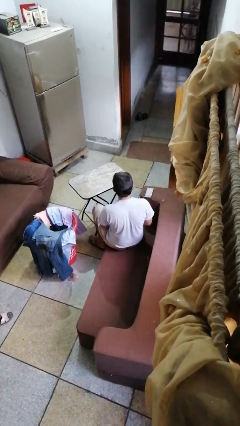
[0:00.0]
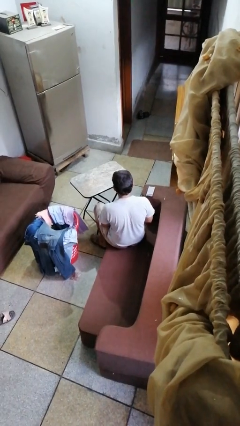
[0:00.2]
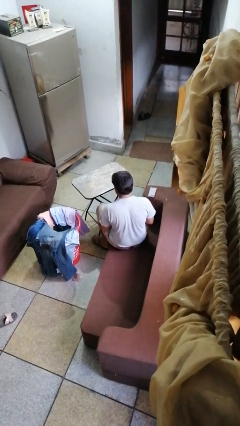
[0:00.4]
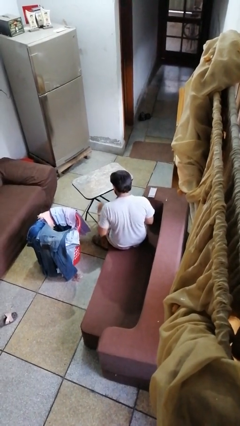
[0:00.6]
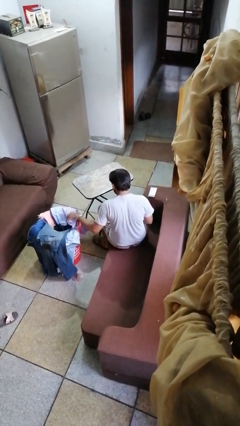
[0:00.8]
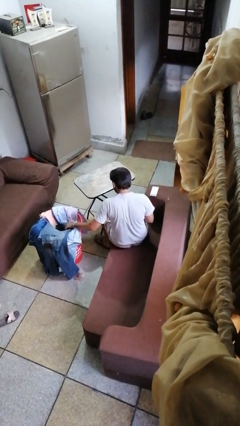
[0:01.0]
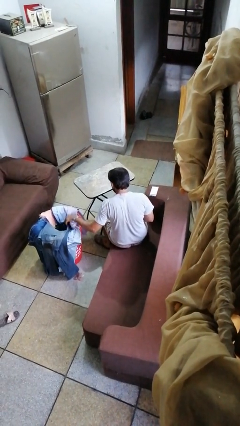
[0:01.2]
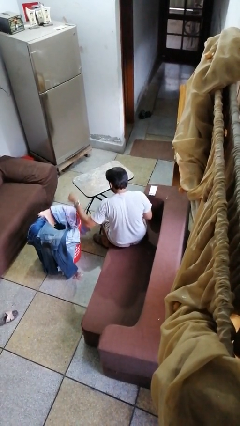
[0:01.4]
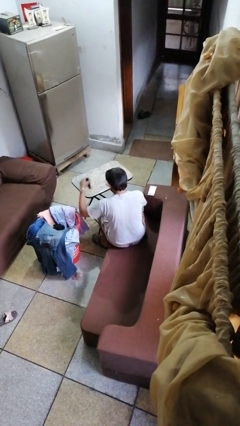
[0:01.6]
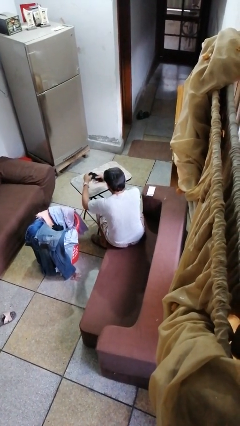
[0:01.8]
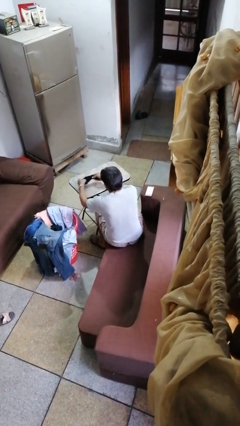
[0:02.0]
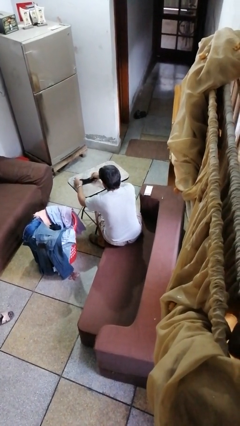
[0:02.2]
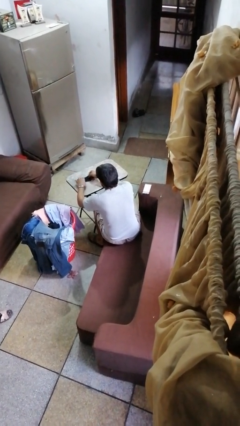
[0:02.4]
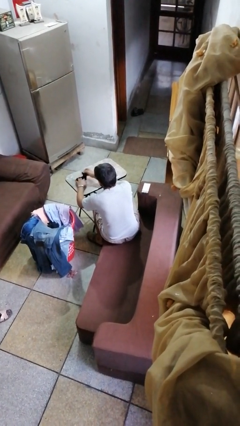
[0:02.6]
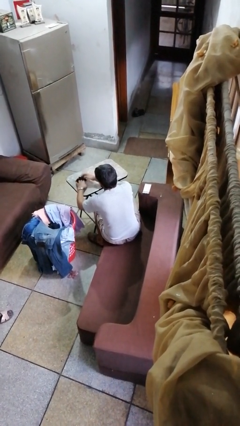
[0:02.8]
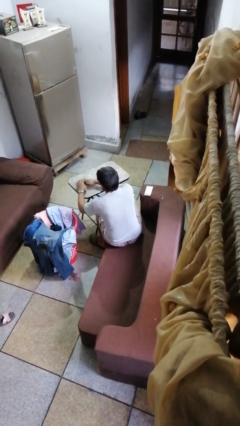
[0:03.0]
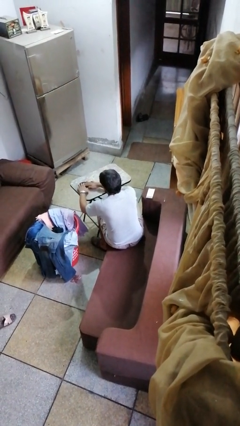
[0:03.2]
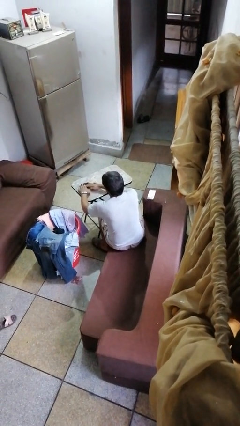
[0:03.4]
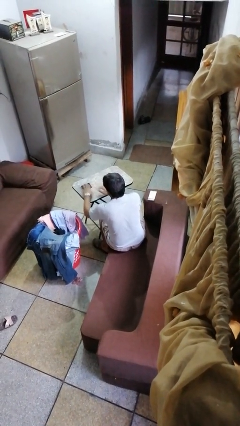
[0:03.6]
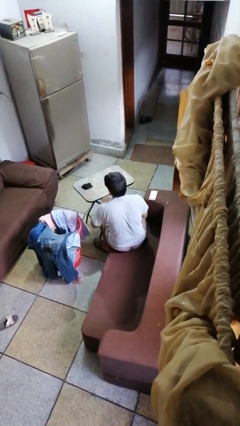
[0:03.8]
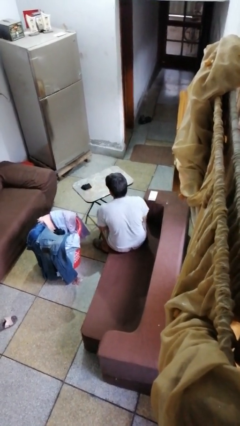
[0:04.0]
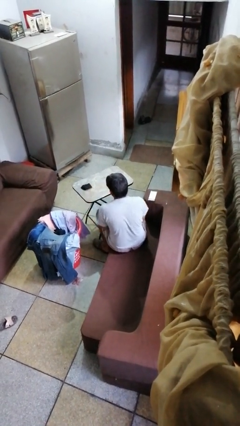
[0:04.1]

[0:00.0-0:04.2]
person folds socks

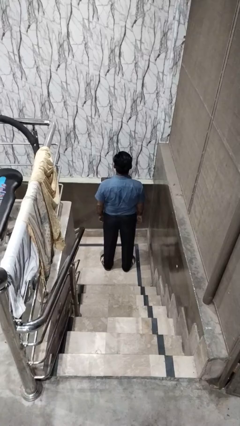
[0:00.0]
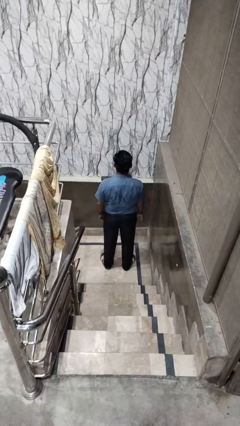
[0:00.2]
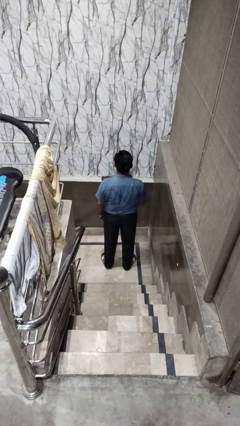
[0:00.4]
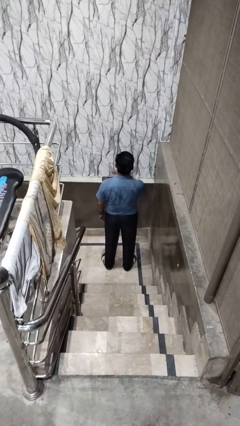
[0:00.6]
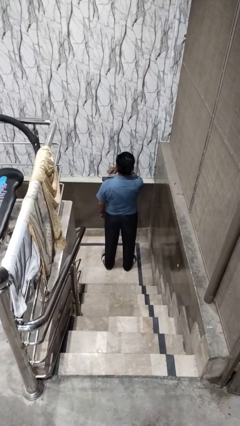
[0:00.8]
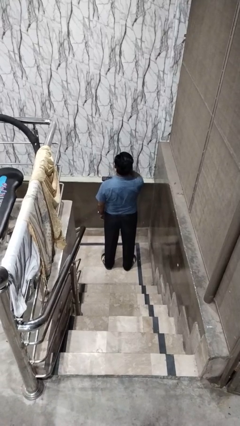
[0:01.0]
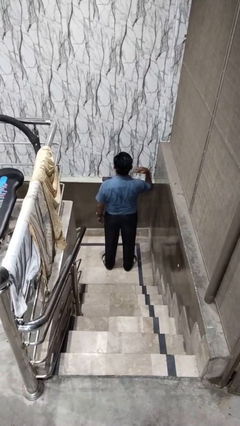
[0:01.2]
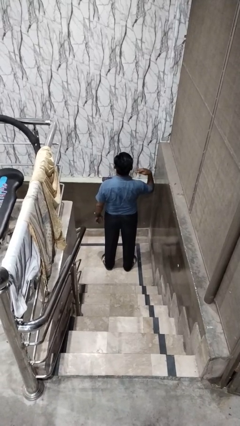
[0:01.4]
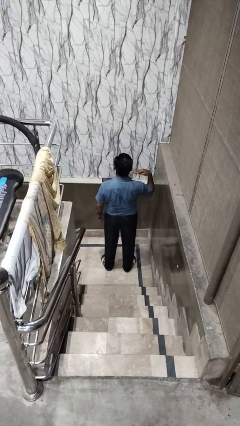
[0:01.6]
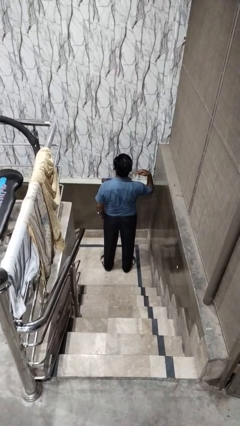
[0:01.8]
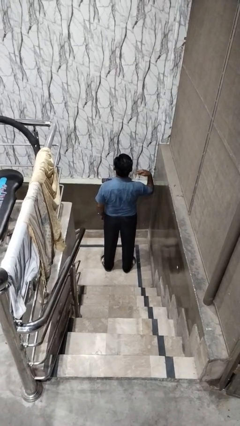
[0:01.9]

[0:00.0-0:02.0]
person gestures cut

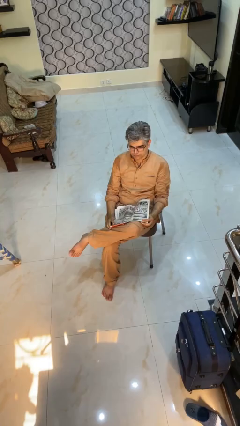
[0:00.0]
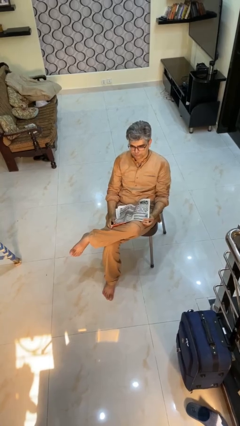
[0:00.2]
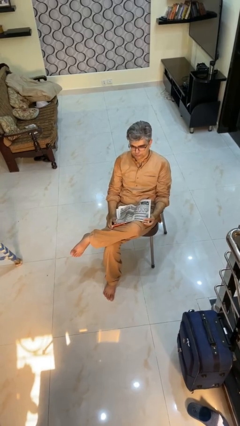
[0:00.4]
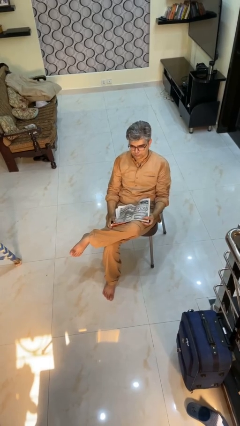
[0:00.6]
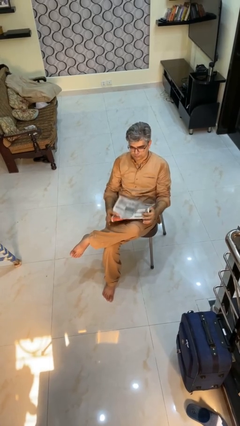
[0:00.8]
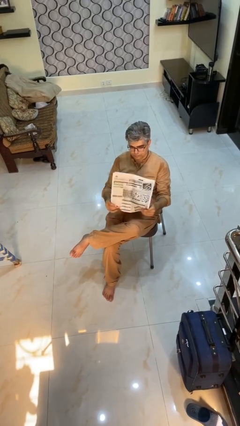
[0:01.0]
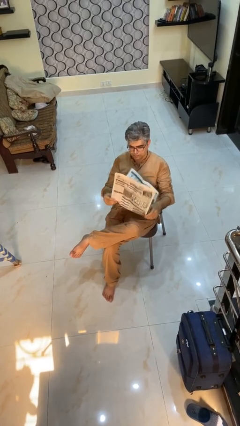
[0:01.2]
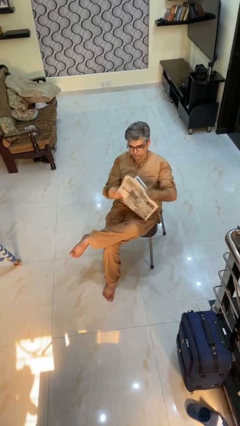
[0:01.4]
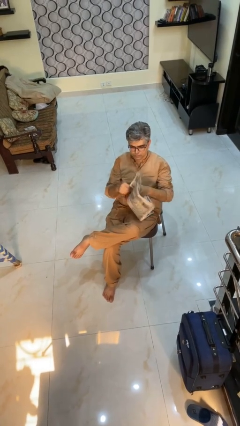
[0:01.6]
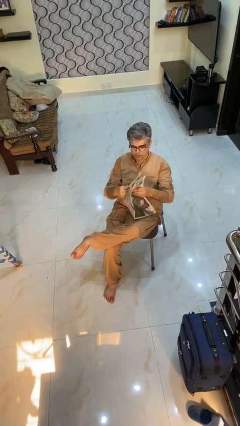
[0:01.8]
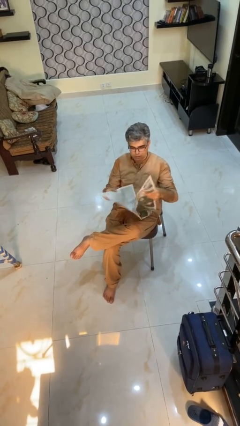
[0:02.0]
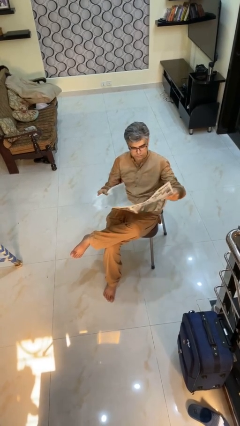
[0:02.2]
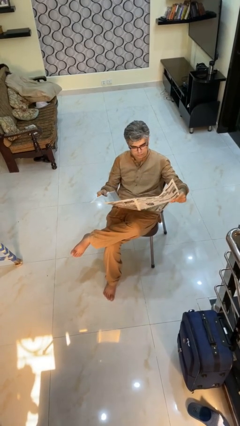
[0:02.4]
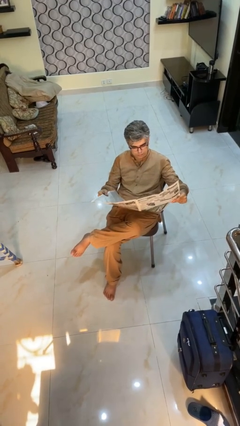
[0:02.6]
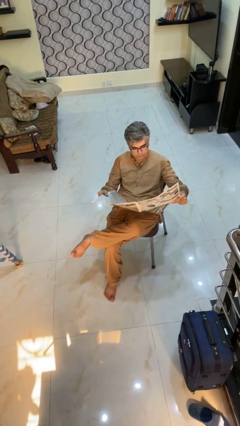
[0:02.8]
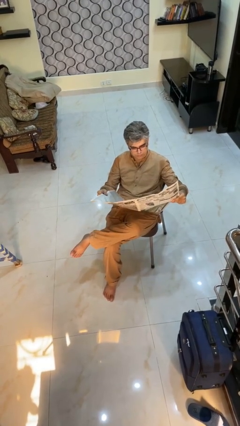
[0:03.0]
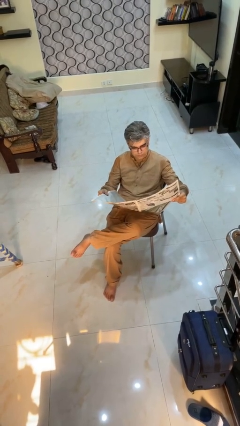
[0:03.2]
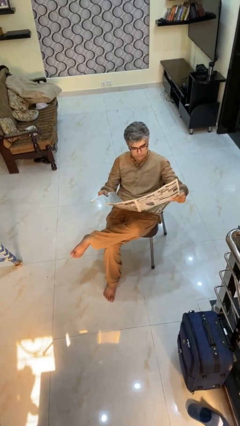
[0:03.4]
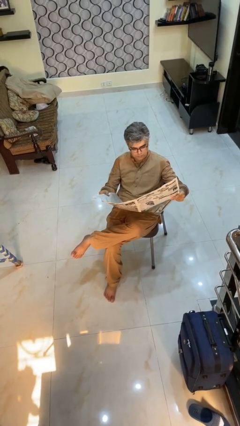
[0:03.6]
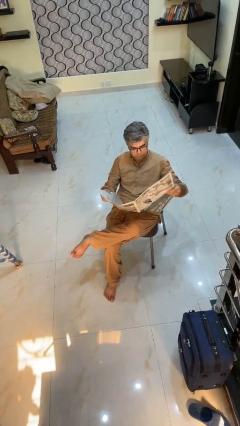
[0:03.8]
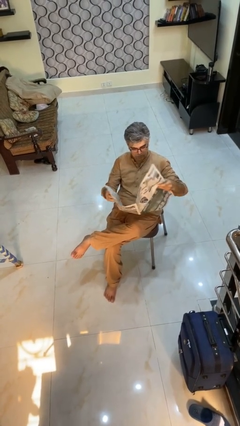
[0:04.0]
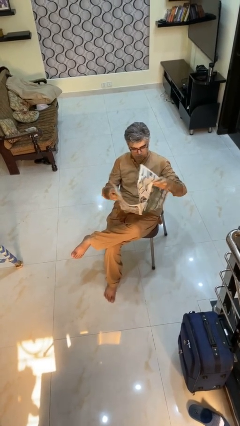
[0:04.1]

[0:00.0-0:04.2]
person reads newspaper

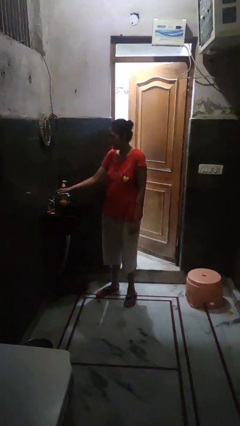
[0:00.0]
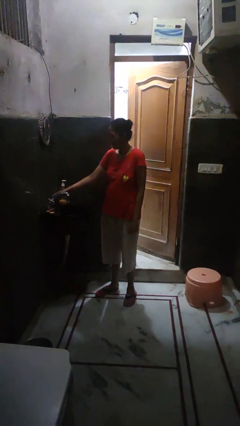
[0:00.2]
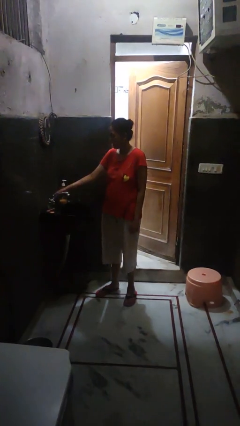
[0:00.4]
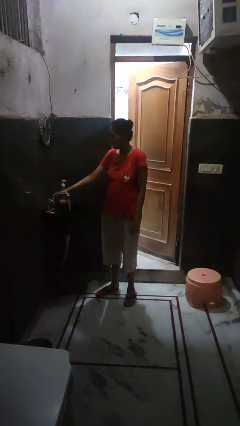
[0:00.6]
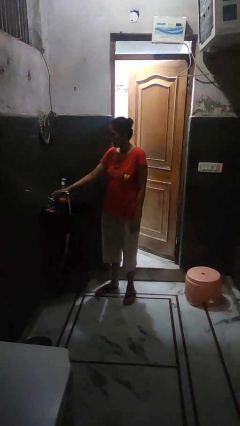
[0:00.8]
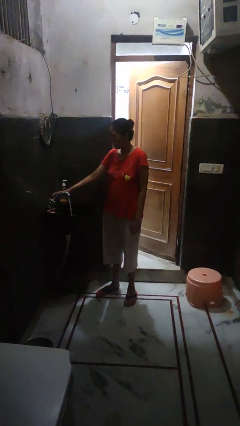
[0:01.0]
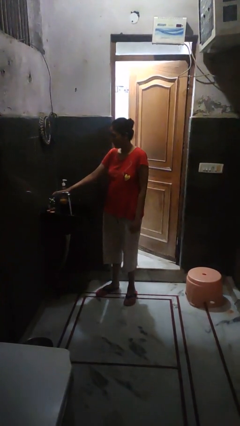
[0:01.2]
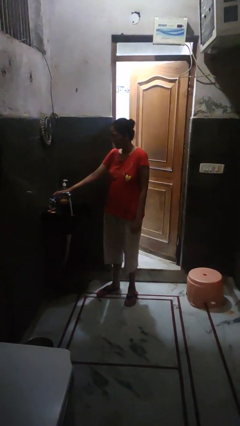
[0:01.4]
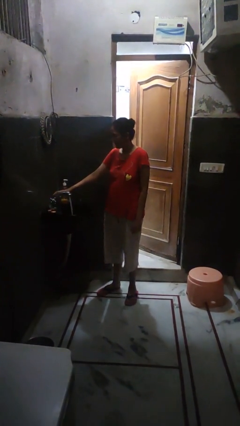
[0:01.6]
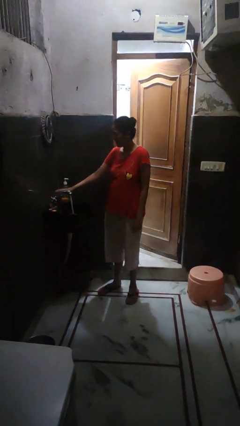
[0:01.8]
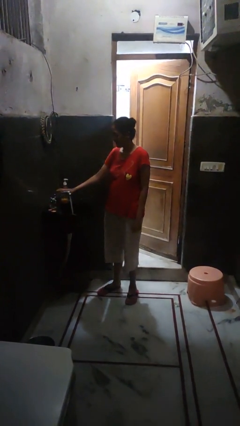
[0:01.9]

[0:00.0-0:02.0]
person turns on faucet

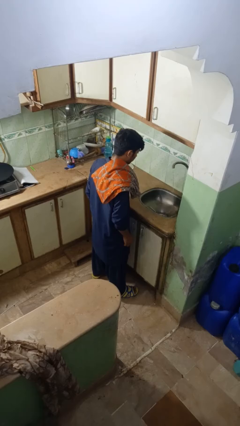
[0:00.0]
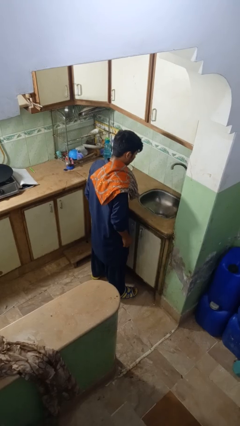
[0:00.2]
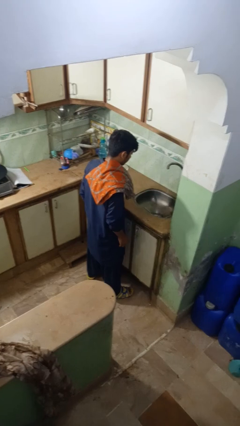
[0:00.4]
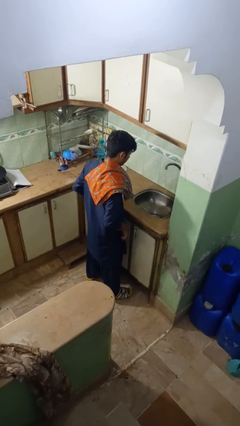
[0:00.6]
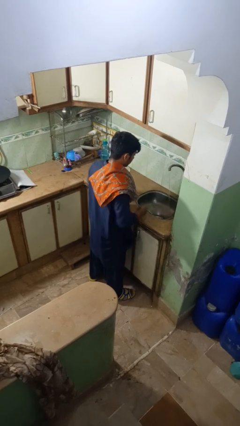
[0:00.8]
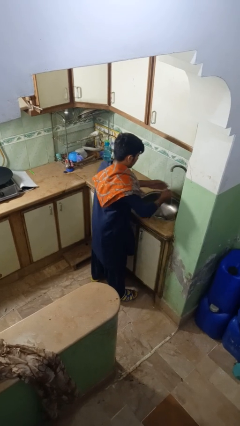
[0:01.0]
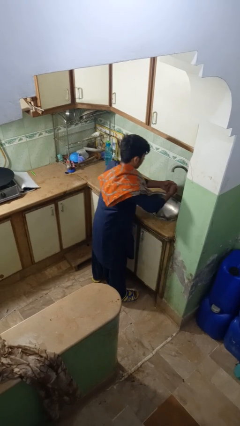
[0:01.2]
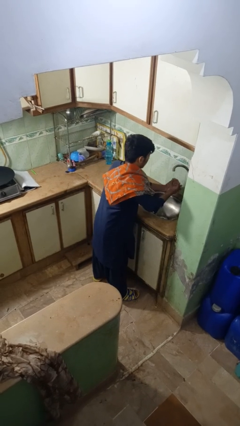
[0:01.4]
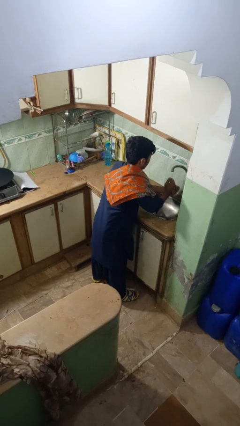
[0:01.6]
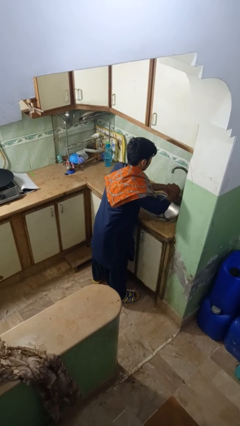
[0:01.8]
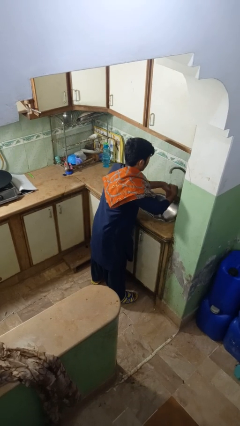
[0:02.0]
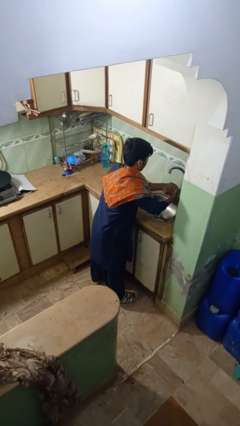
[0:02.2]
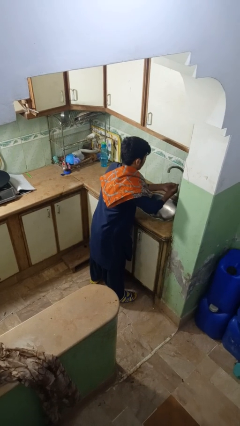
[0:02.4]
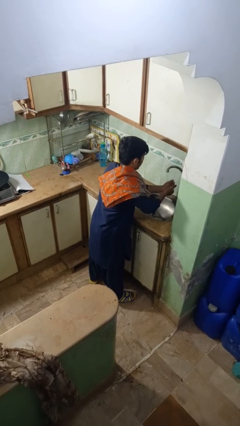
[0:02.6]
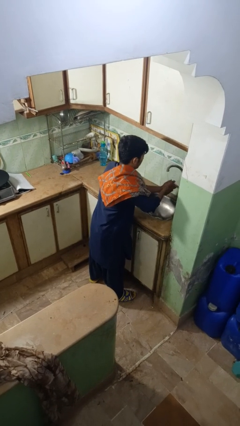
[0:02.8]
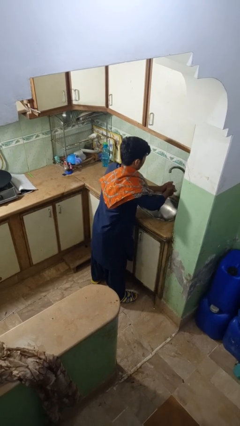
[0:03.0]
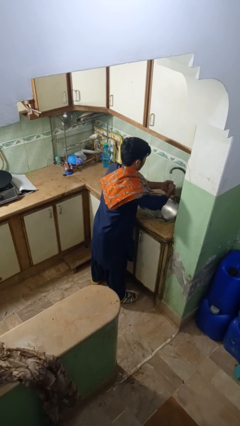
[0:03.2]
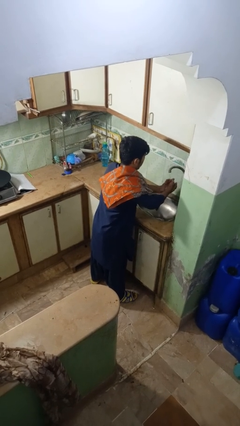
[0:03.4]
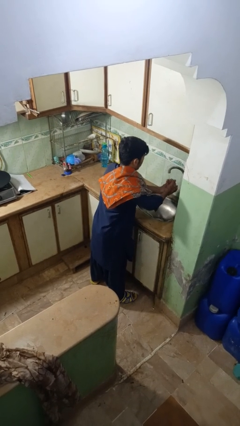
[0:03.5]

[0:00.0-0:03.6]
person washes hands

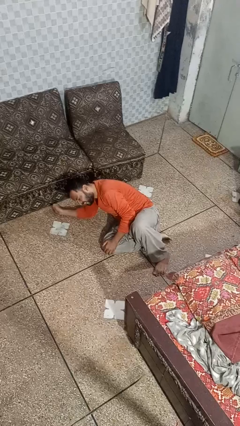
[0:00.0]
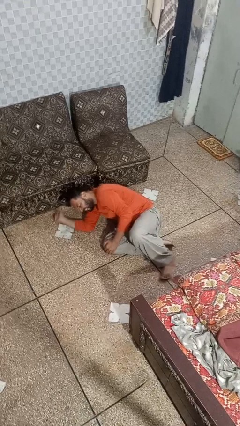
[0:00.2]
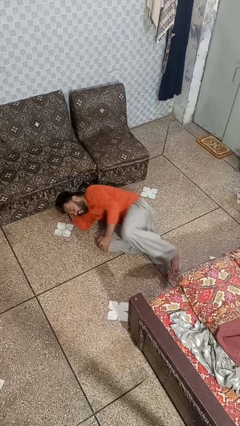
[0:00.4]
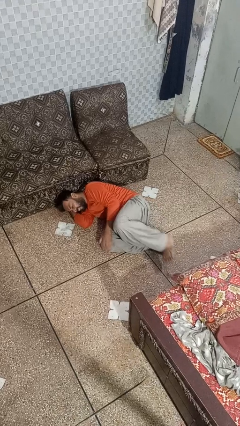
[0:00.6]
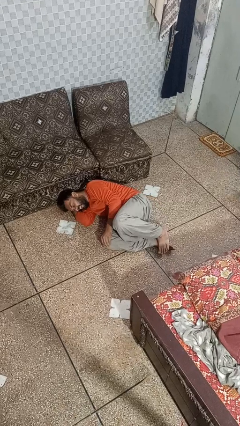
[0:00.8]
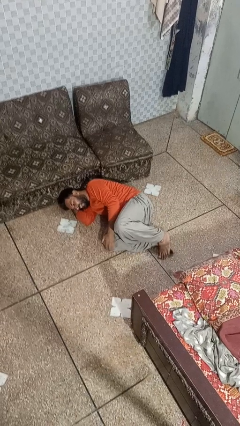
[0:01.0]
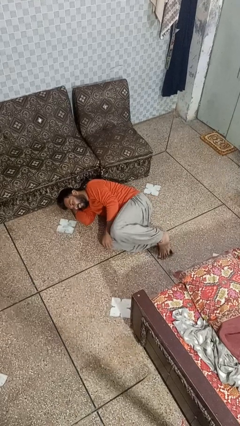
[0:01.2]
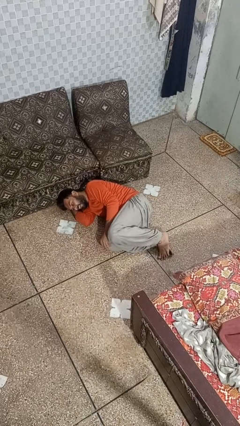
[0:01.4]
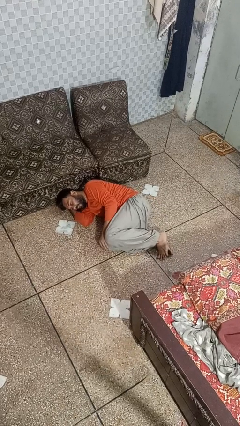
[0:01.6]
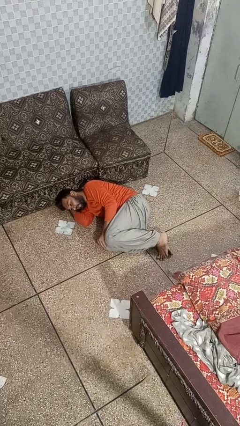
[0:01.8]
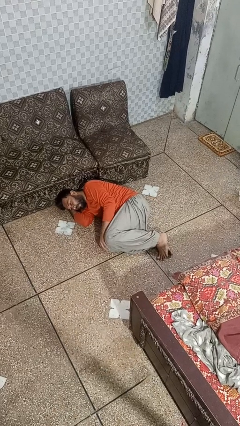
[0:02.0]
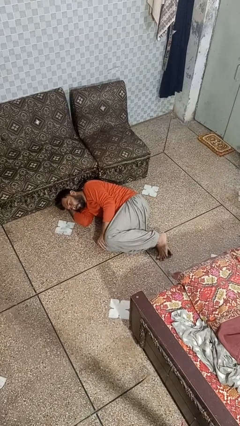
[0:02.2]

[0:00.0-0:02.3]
person lies down on floor
